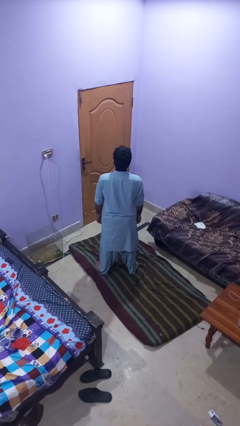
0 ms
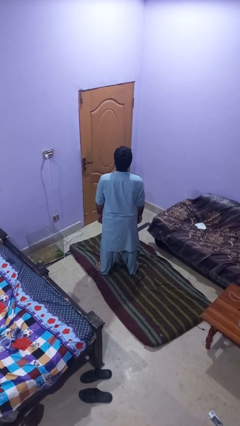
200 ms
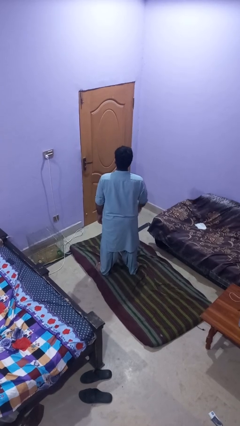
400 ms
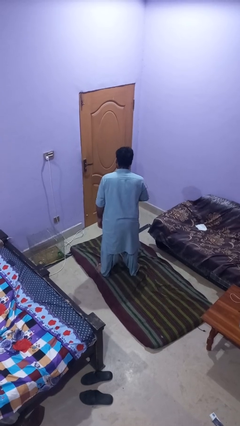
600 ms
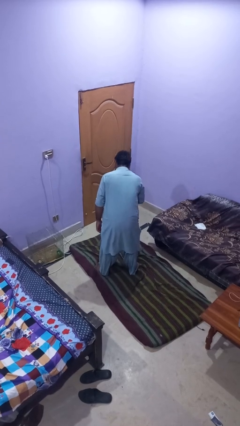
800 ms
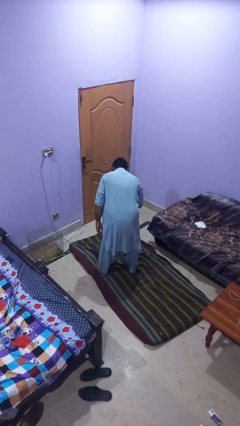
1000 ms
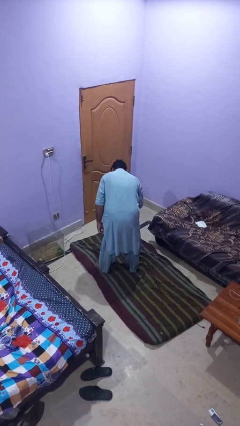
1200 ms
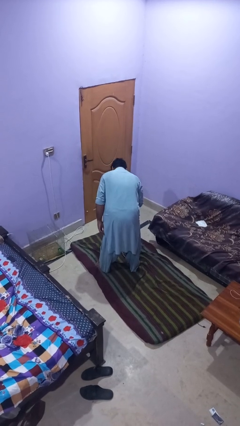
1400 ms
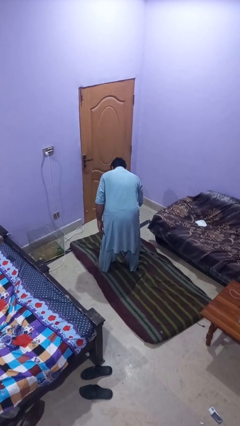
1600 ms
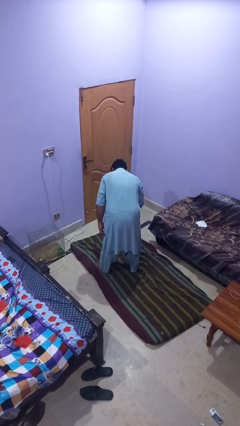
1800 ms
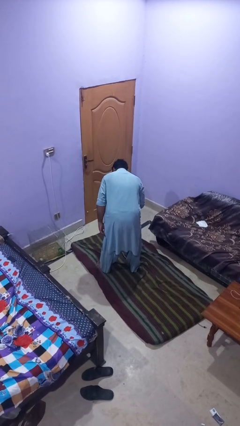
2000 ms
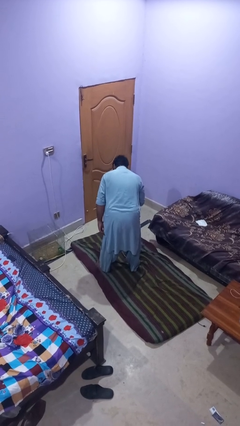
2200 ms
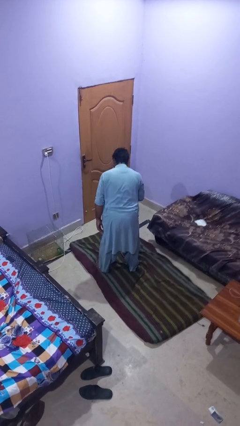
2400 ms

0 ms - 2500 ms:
person bows

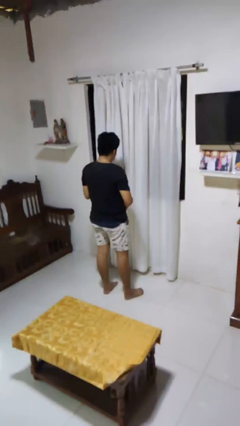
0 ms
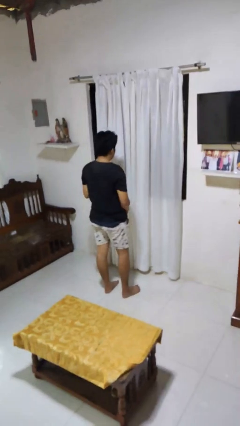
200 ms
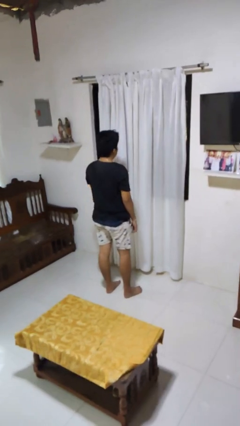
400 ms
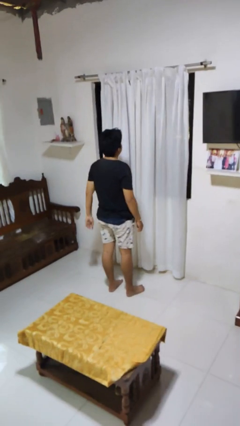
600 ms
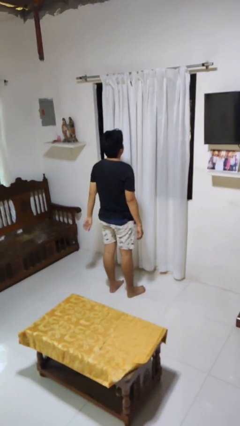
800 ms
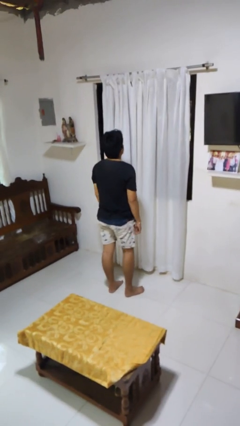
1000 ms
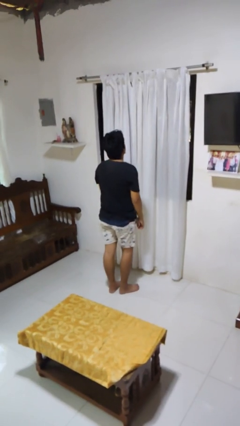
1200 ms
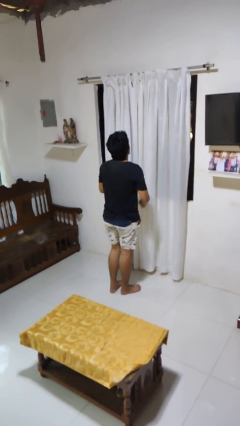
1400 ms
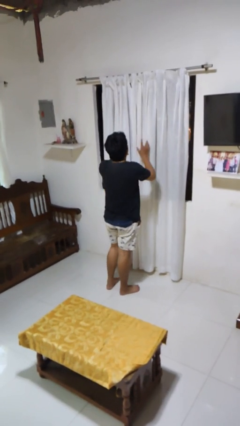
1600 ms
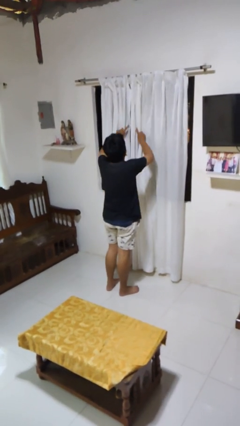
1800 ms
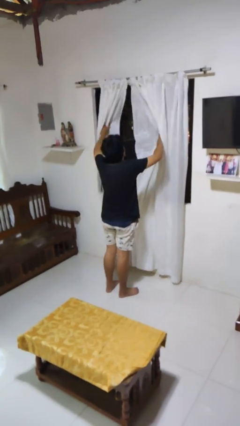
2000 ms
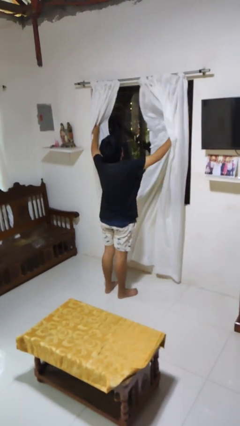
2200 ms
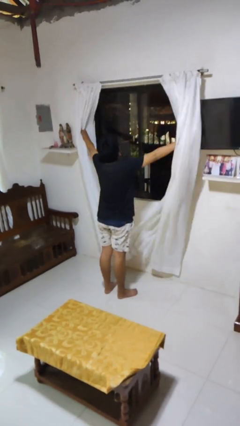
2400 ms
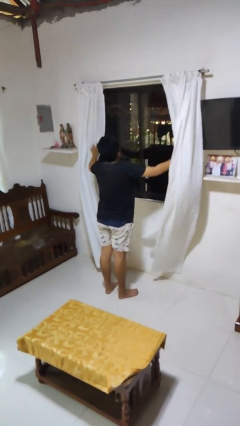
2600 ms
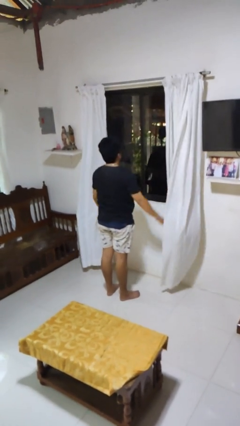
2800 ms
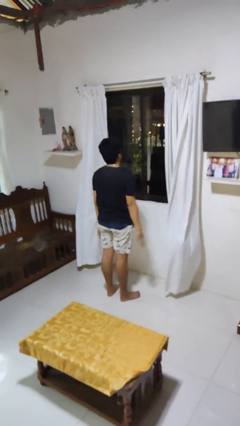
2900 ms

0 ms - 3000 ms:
person opens curtains

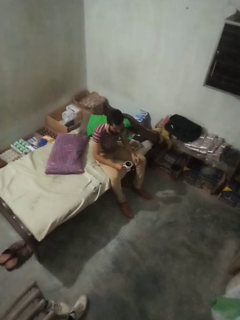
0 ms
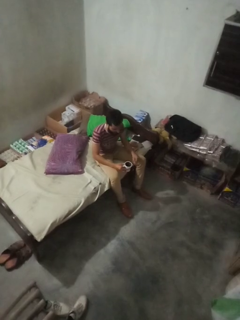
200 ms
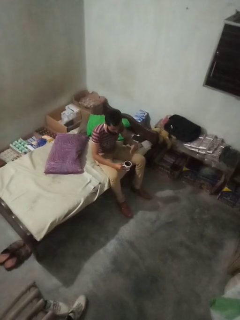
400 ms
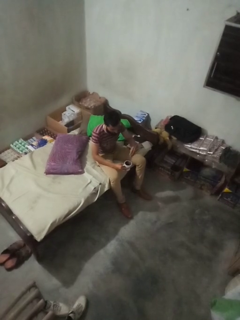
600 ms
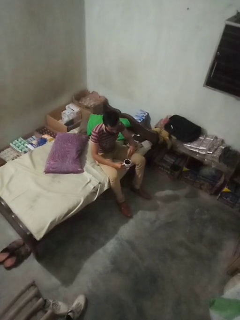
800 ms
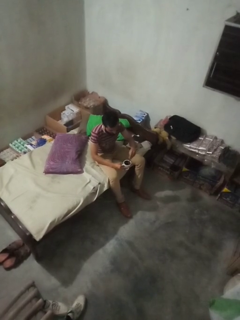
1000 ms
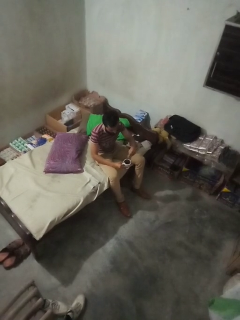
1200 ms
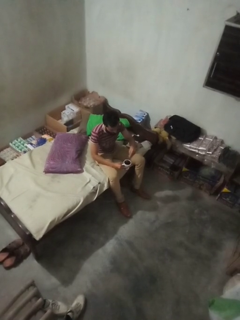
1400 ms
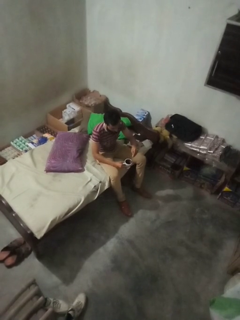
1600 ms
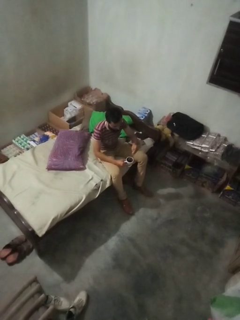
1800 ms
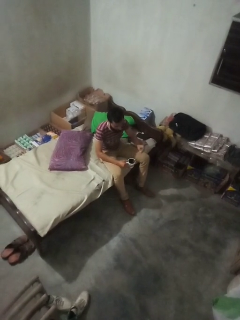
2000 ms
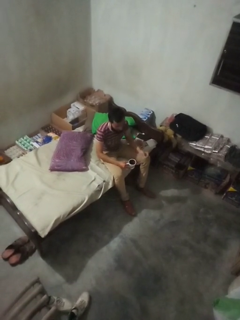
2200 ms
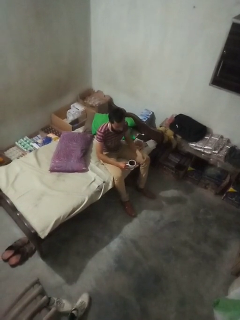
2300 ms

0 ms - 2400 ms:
person stirs mug

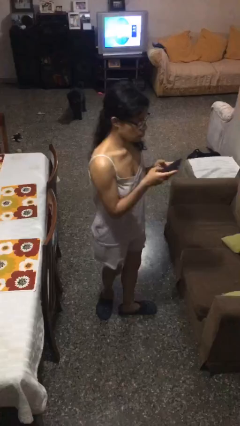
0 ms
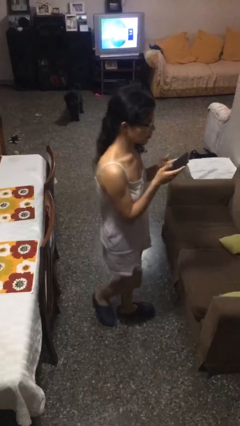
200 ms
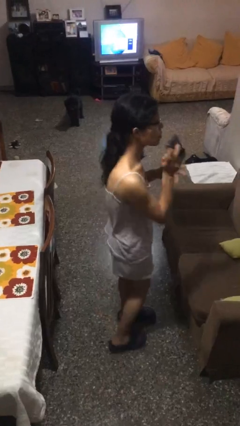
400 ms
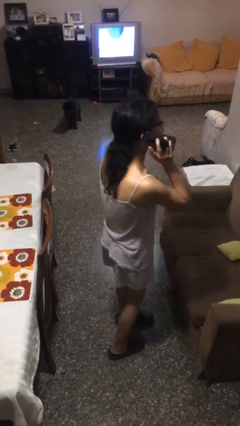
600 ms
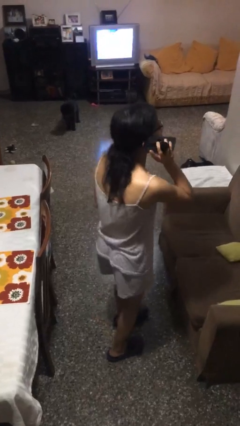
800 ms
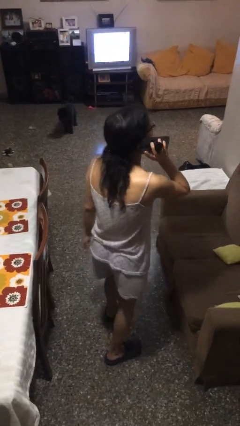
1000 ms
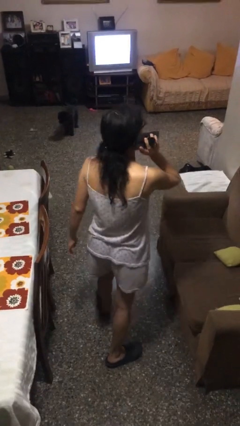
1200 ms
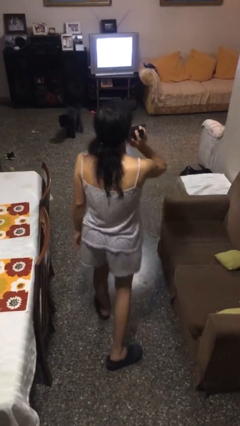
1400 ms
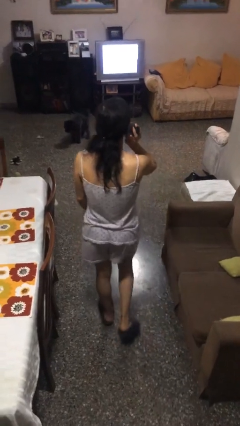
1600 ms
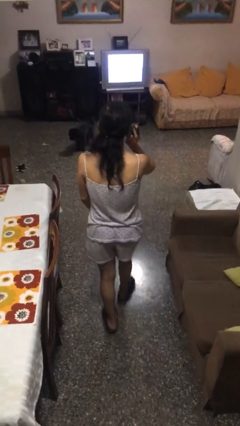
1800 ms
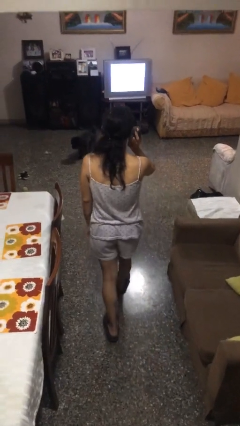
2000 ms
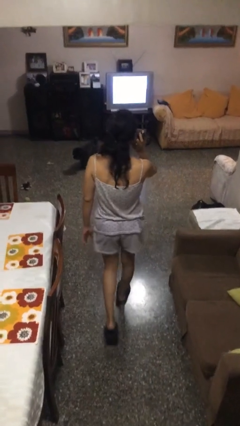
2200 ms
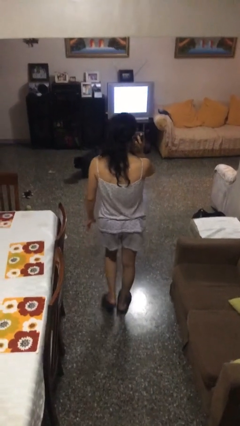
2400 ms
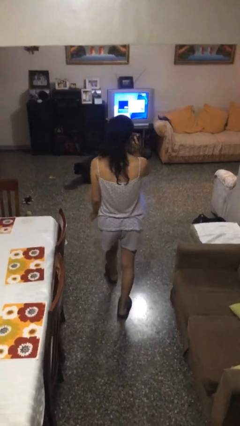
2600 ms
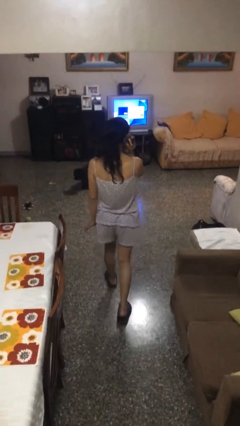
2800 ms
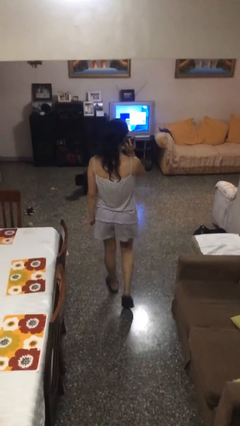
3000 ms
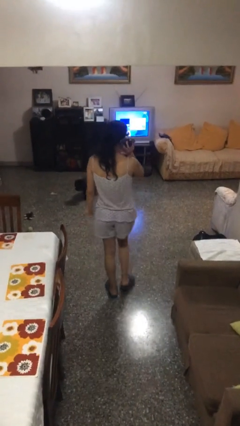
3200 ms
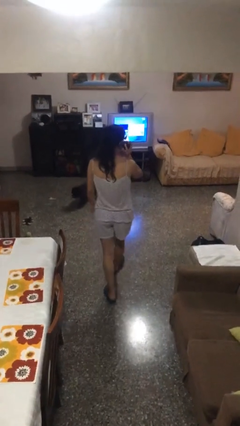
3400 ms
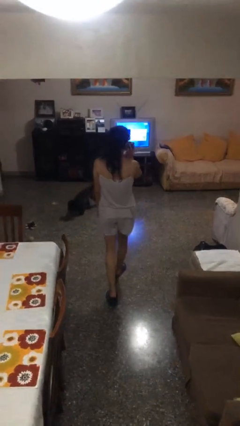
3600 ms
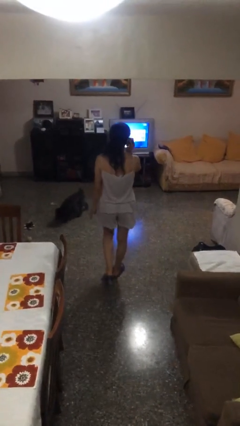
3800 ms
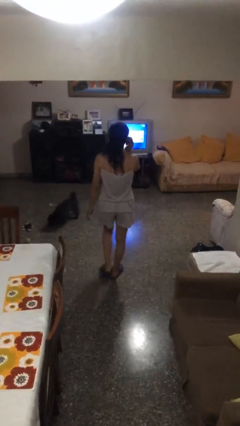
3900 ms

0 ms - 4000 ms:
person talks on phone

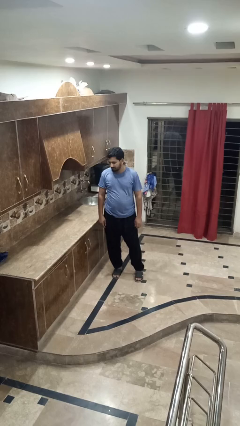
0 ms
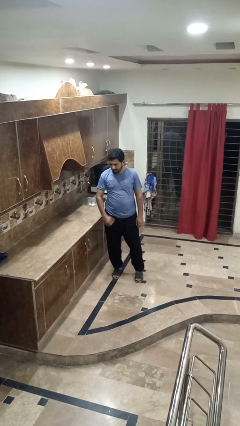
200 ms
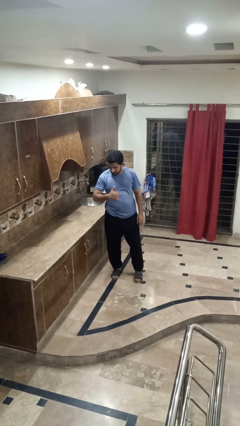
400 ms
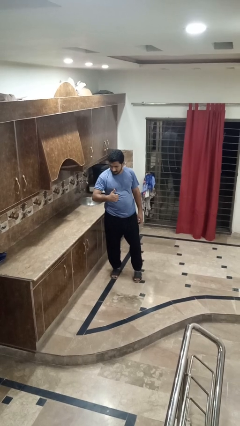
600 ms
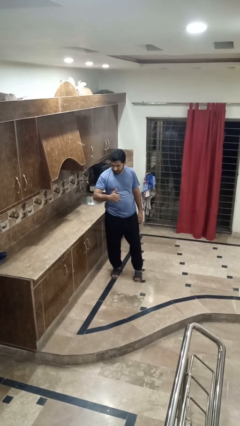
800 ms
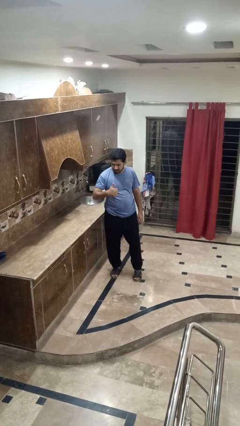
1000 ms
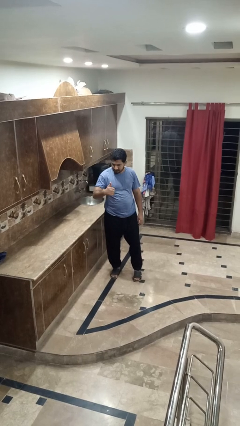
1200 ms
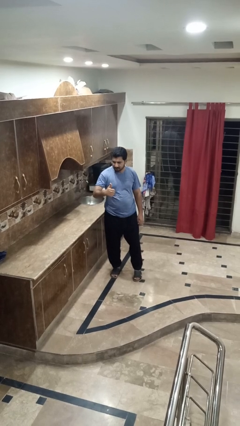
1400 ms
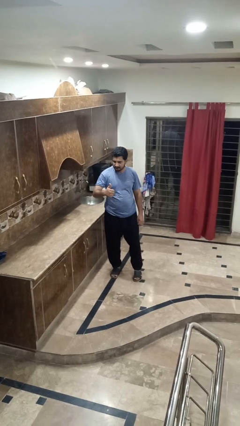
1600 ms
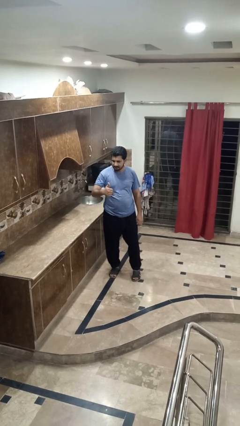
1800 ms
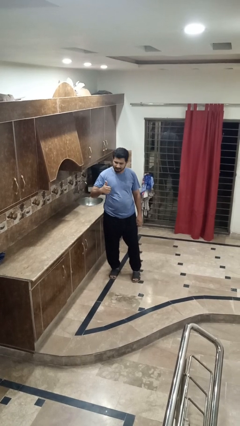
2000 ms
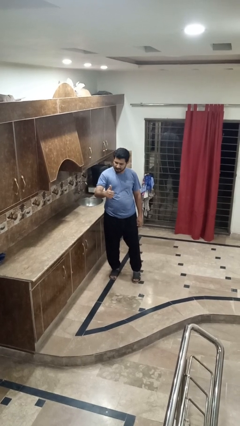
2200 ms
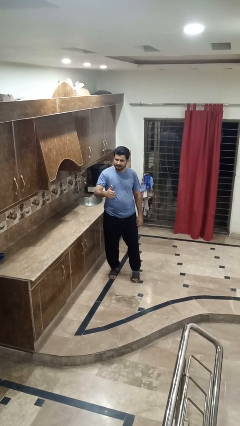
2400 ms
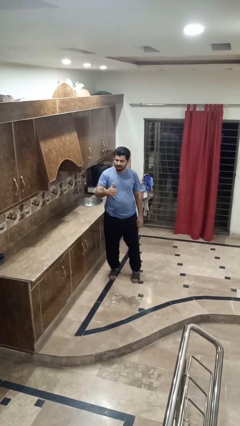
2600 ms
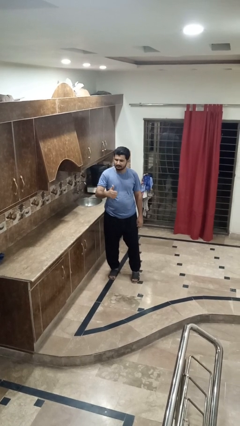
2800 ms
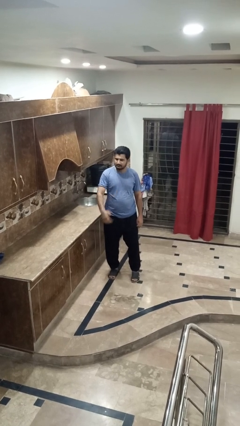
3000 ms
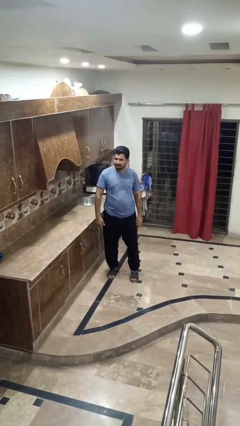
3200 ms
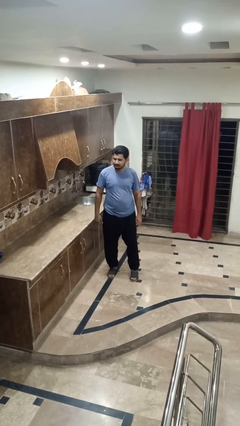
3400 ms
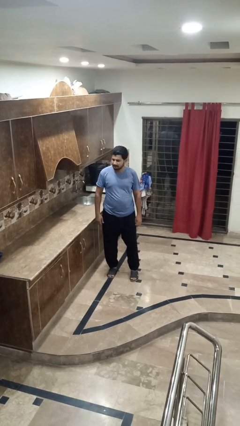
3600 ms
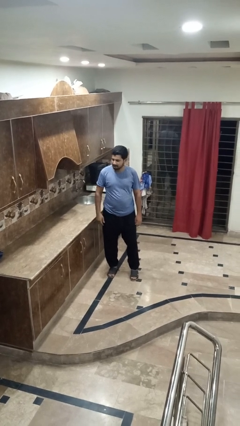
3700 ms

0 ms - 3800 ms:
person gestures thumbs up

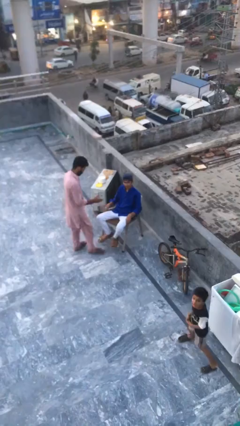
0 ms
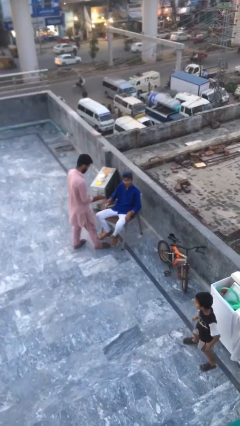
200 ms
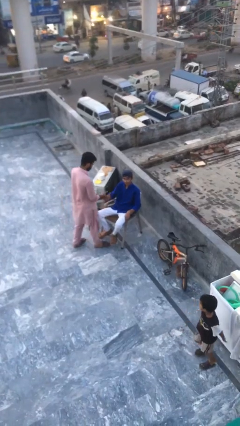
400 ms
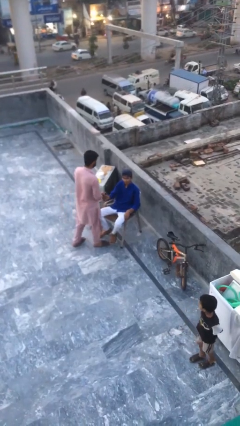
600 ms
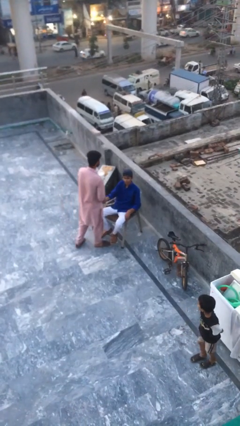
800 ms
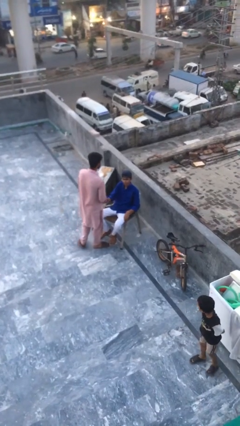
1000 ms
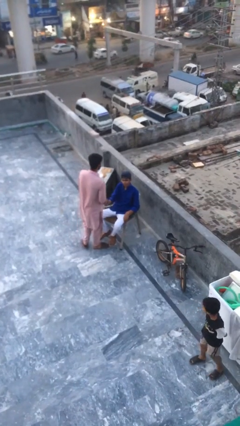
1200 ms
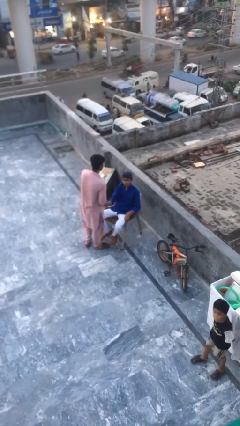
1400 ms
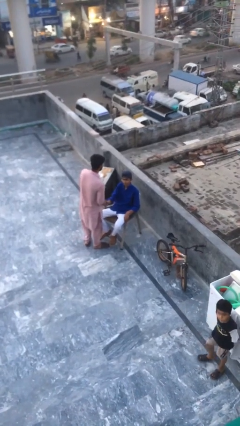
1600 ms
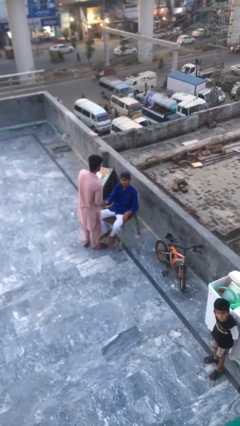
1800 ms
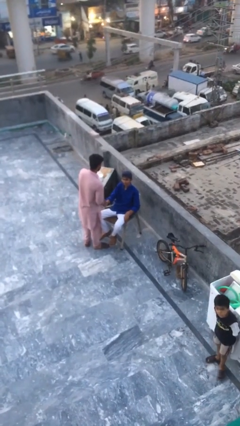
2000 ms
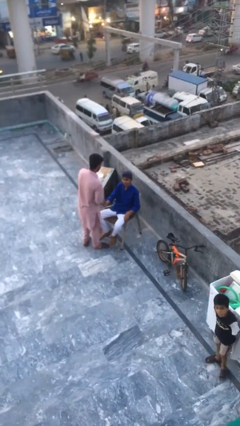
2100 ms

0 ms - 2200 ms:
person shakes hand
